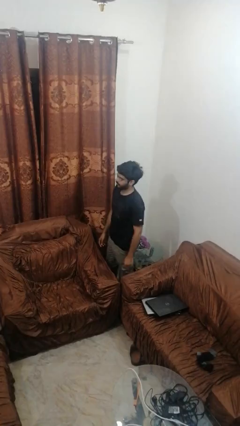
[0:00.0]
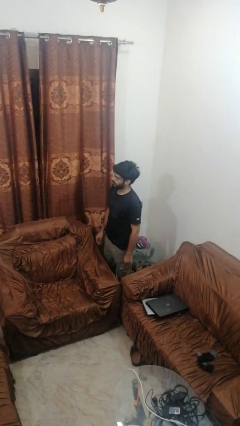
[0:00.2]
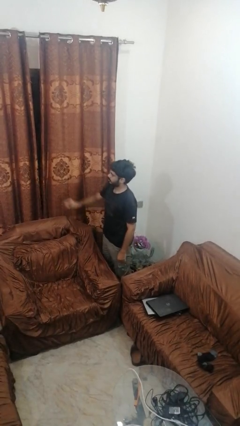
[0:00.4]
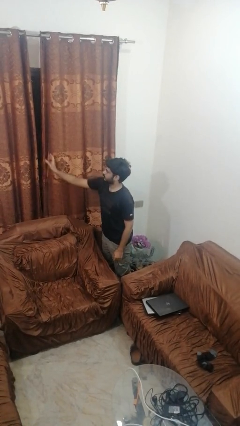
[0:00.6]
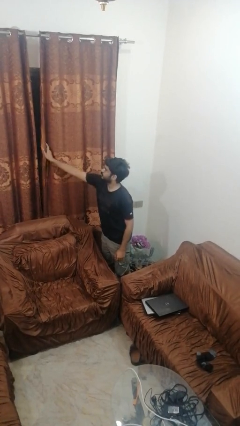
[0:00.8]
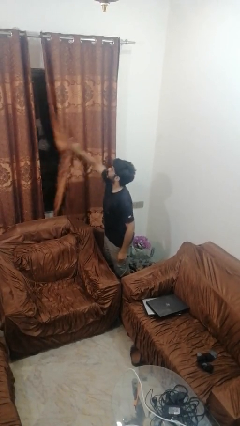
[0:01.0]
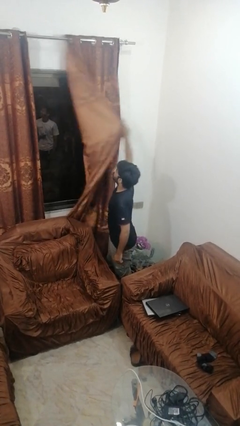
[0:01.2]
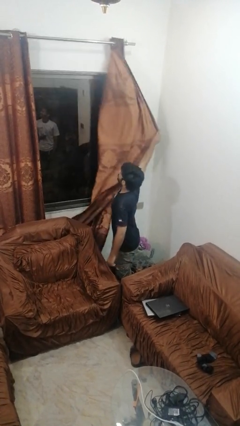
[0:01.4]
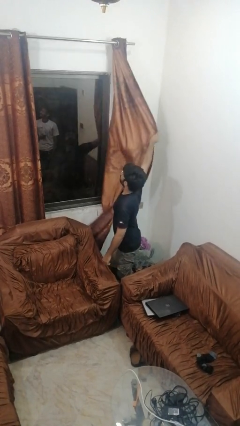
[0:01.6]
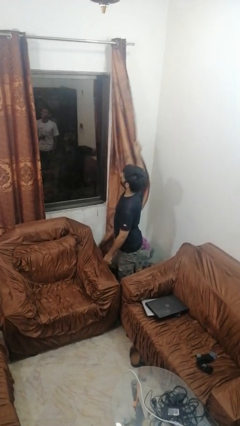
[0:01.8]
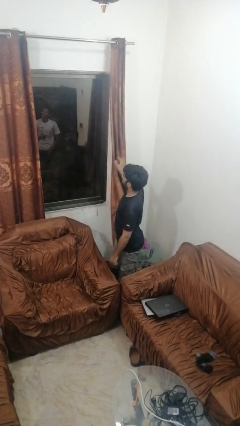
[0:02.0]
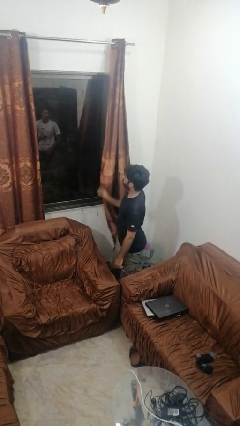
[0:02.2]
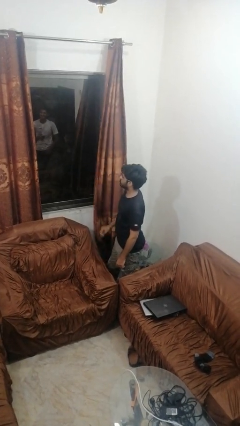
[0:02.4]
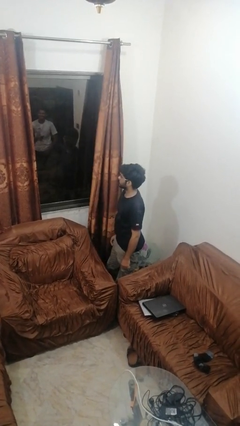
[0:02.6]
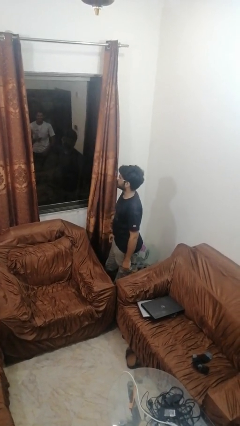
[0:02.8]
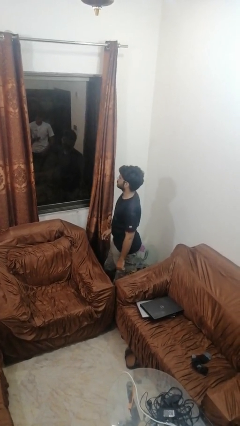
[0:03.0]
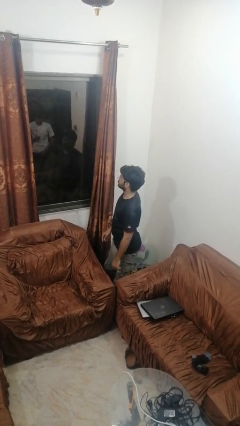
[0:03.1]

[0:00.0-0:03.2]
person opens curtains

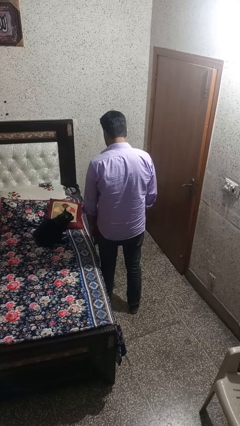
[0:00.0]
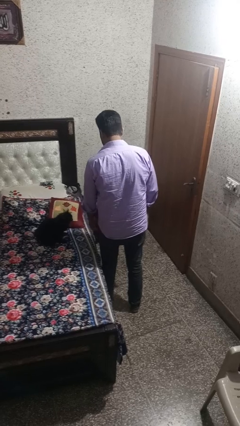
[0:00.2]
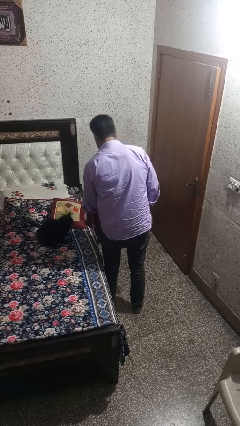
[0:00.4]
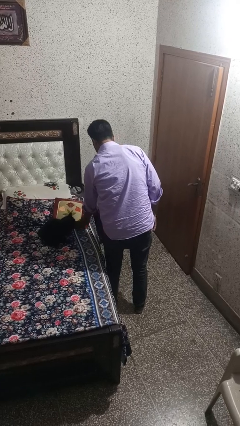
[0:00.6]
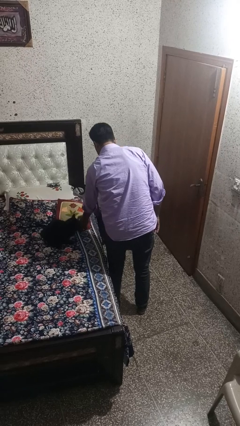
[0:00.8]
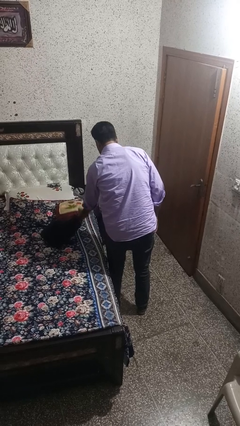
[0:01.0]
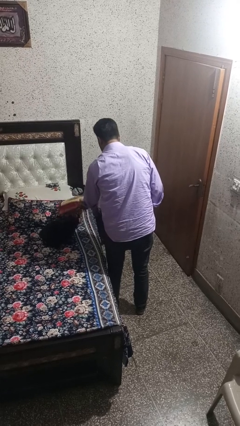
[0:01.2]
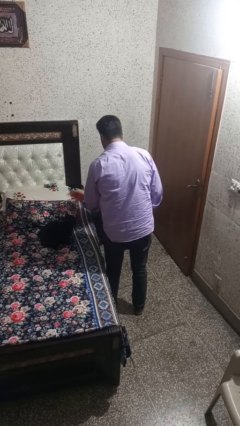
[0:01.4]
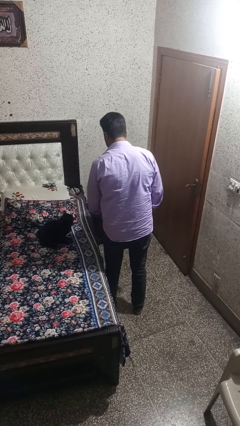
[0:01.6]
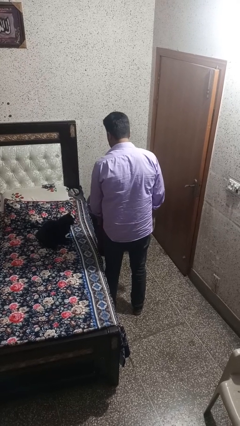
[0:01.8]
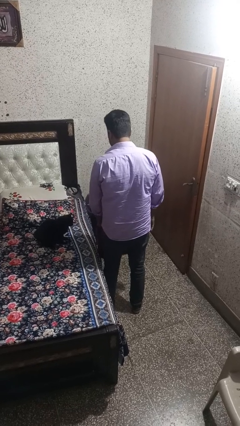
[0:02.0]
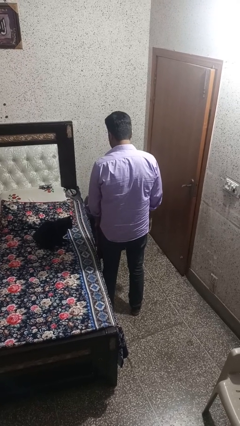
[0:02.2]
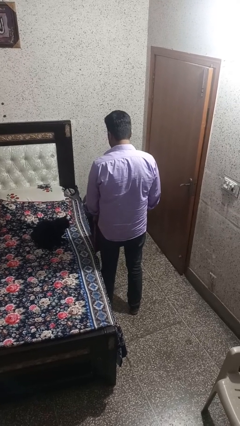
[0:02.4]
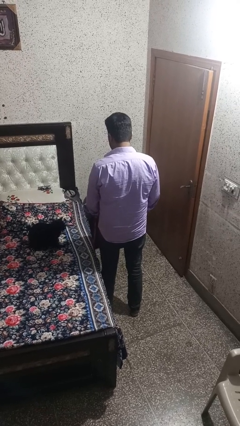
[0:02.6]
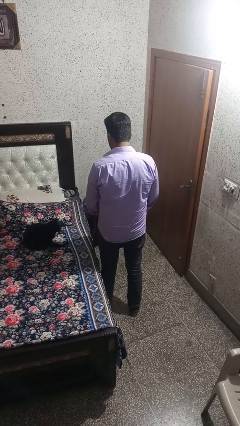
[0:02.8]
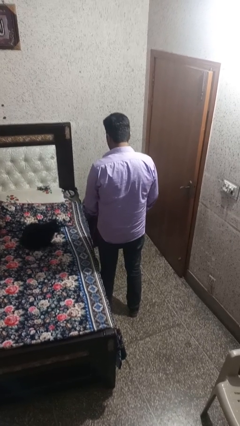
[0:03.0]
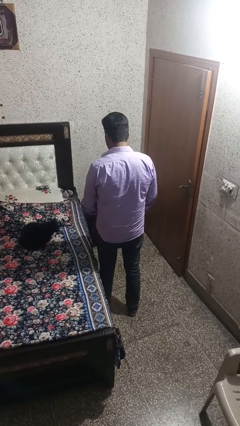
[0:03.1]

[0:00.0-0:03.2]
person picks up object from bed

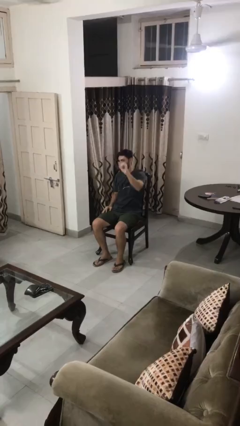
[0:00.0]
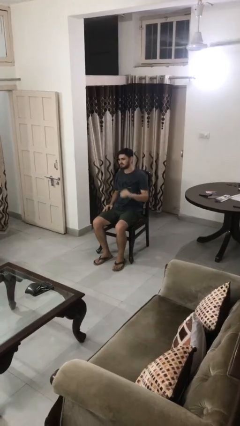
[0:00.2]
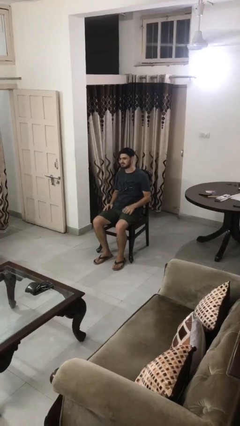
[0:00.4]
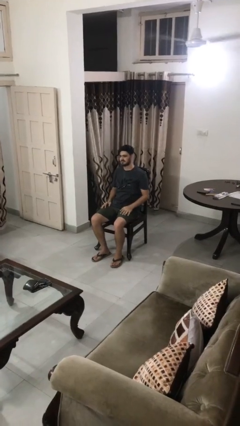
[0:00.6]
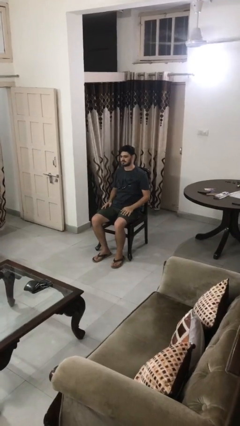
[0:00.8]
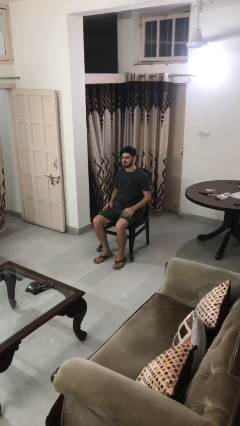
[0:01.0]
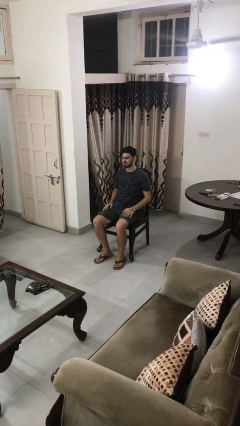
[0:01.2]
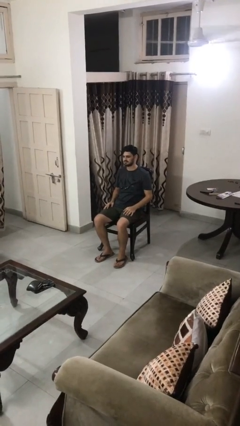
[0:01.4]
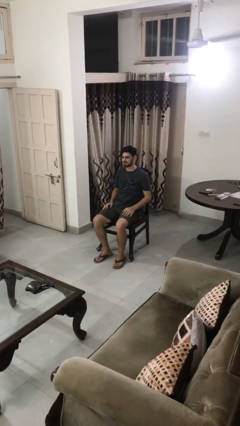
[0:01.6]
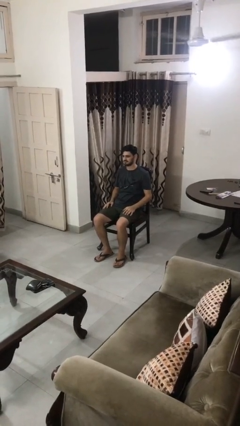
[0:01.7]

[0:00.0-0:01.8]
person gestures lower hand

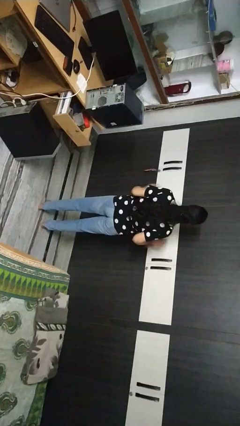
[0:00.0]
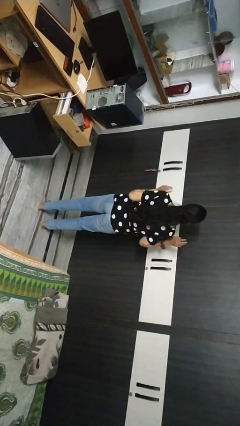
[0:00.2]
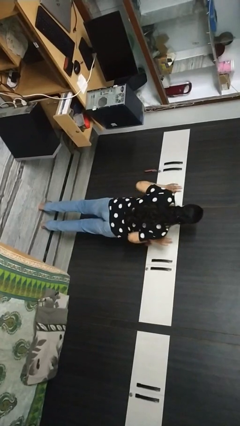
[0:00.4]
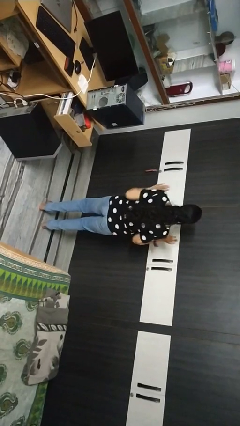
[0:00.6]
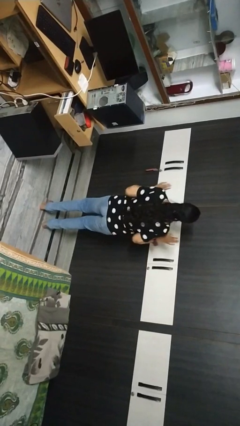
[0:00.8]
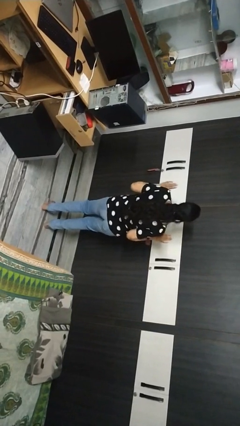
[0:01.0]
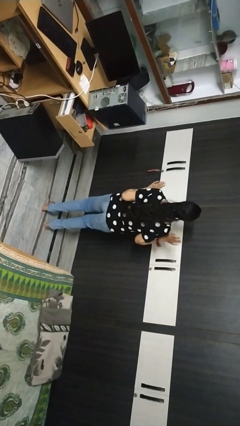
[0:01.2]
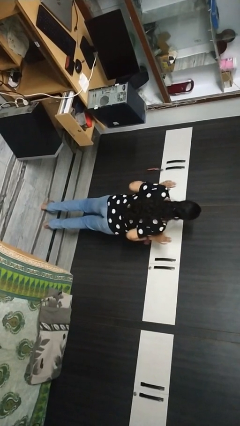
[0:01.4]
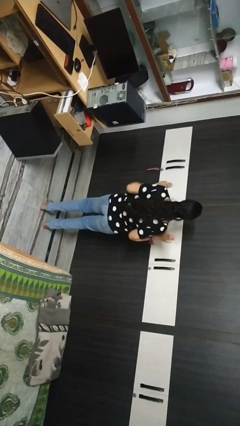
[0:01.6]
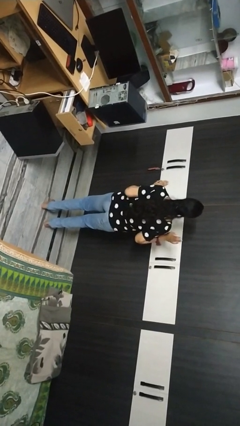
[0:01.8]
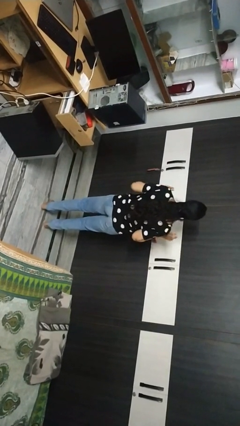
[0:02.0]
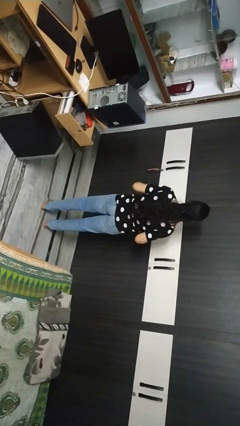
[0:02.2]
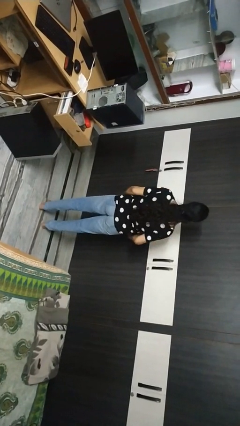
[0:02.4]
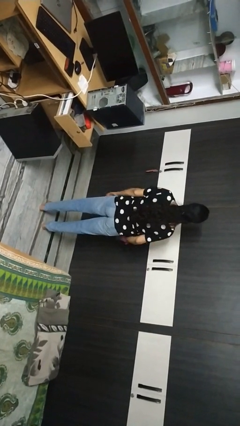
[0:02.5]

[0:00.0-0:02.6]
person dances in place

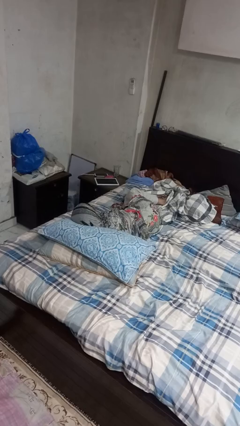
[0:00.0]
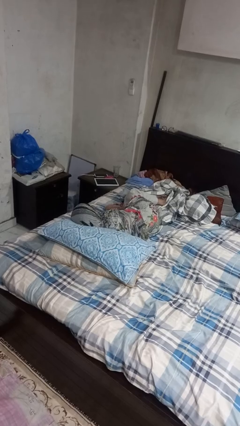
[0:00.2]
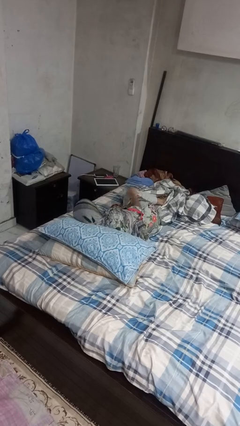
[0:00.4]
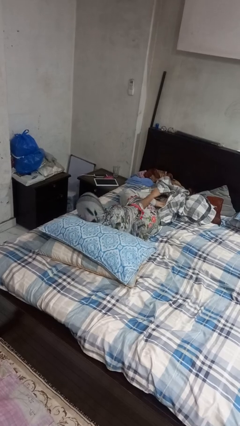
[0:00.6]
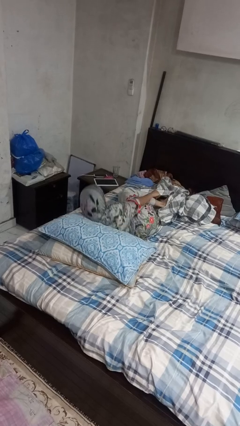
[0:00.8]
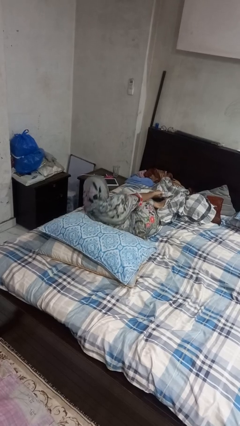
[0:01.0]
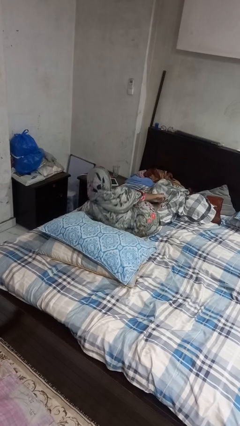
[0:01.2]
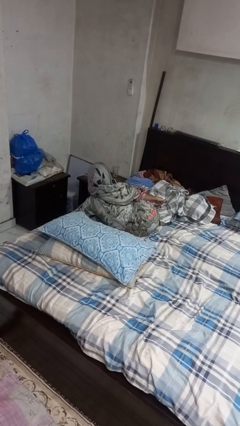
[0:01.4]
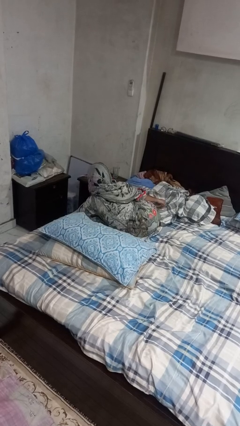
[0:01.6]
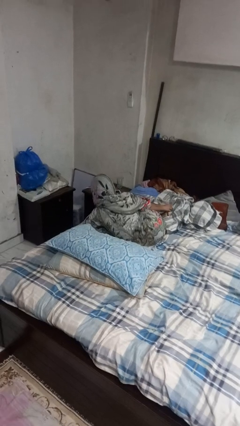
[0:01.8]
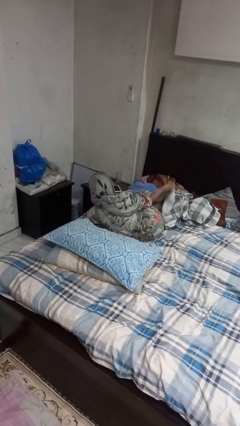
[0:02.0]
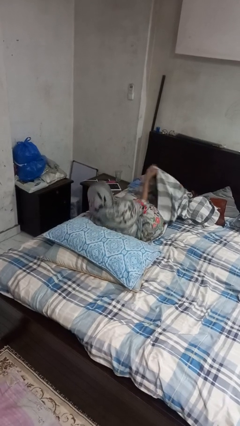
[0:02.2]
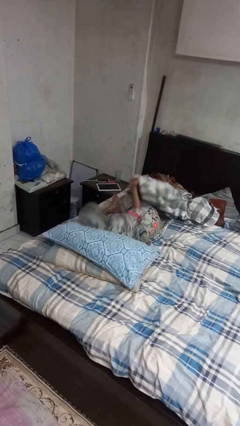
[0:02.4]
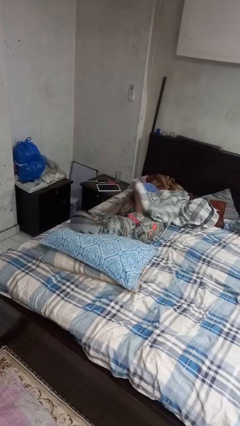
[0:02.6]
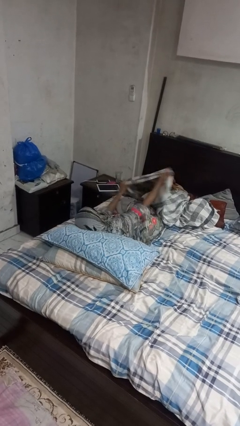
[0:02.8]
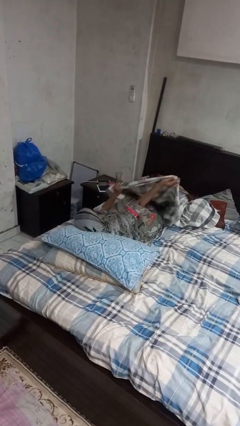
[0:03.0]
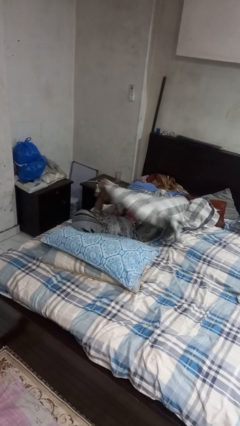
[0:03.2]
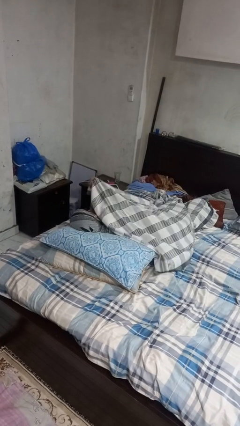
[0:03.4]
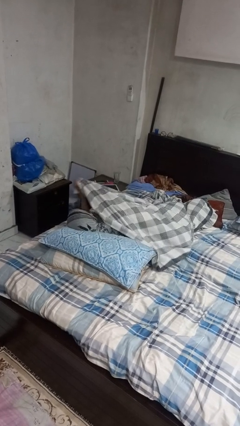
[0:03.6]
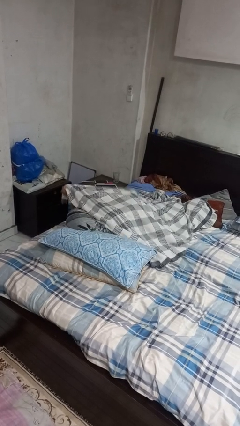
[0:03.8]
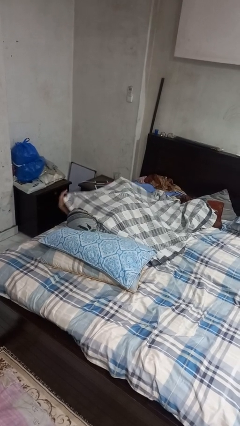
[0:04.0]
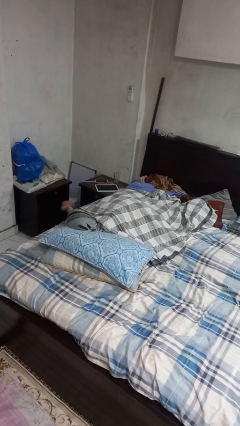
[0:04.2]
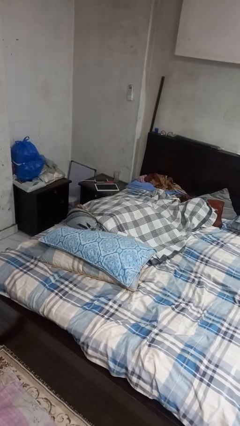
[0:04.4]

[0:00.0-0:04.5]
person covers with bedsheets

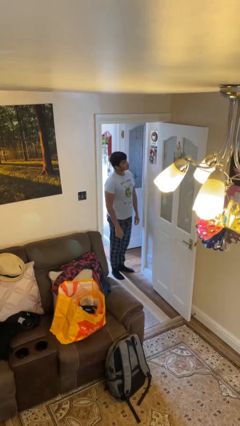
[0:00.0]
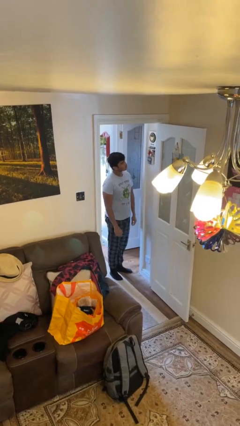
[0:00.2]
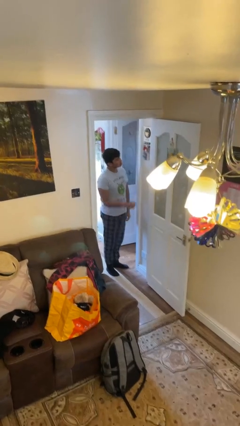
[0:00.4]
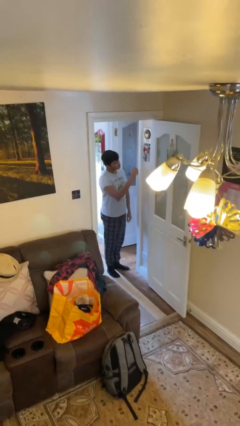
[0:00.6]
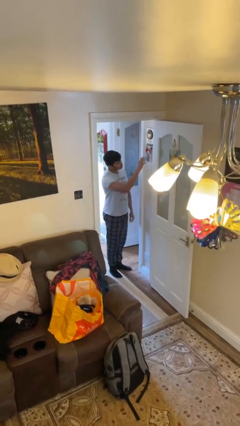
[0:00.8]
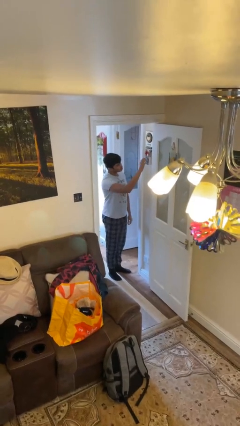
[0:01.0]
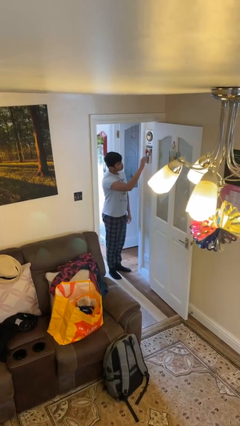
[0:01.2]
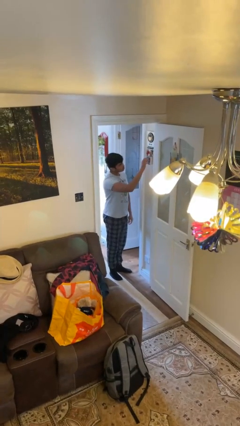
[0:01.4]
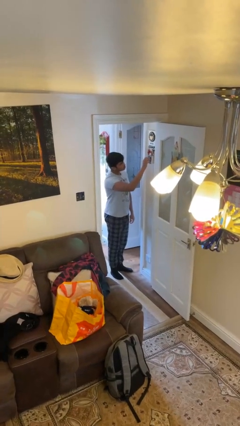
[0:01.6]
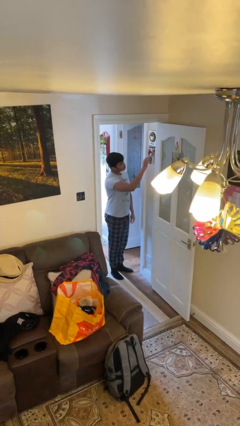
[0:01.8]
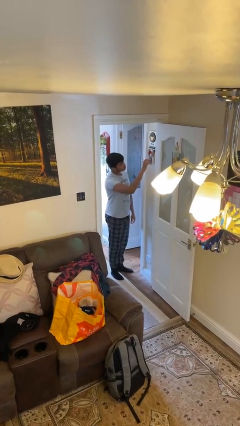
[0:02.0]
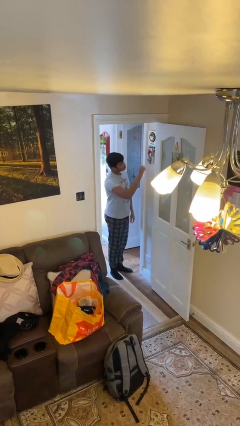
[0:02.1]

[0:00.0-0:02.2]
person adjusts thermostat
